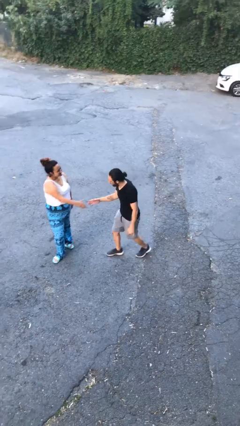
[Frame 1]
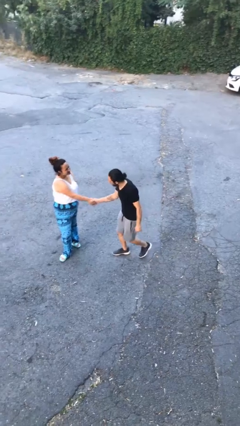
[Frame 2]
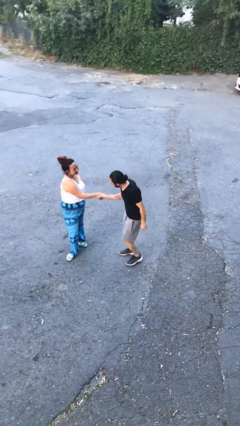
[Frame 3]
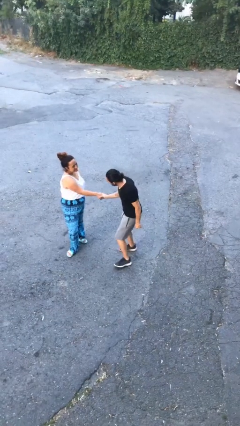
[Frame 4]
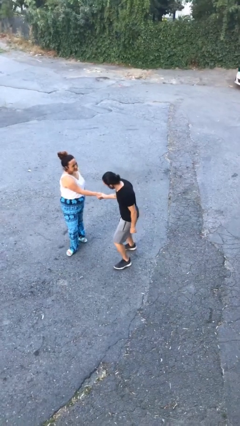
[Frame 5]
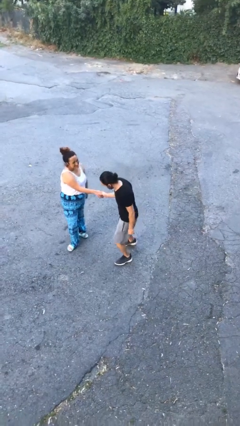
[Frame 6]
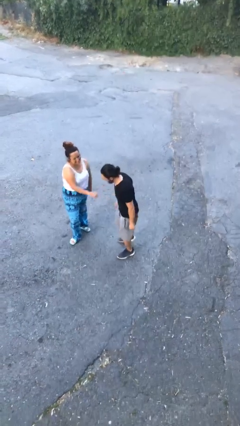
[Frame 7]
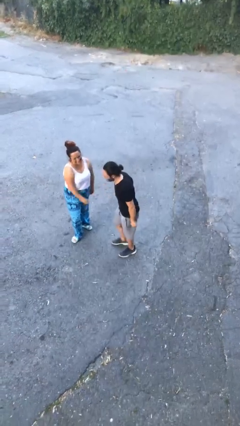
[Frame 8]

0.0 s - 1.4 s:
person shakes hand

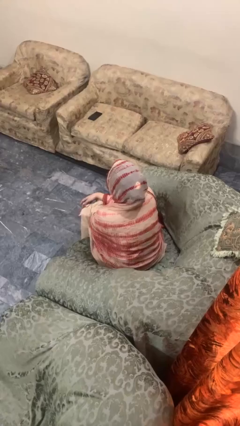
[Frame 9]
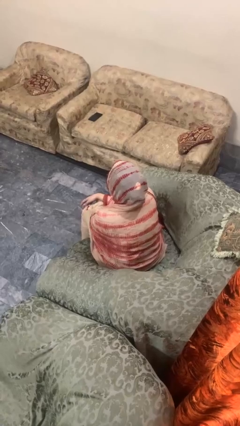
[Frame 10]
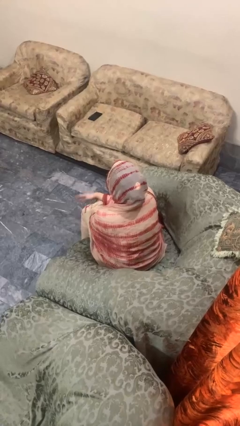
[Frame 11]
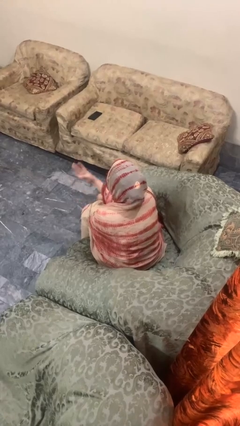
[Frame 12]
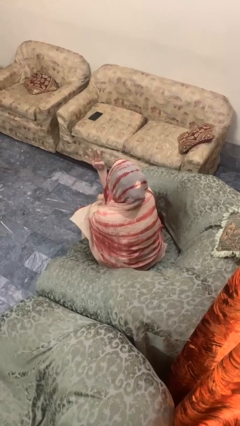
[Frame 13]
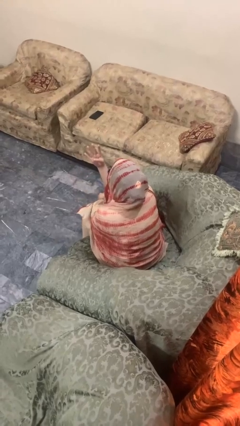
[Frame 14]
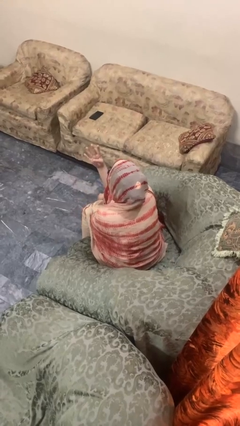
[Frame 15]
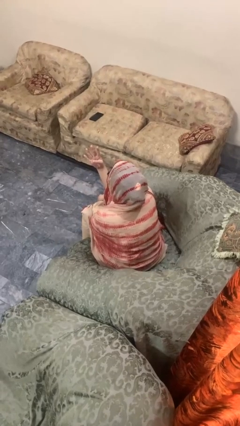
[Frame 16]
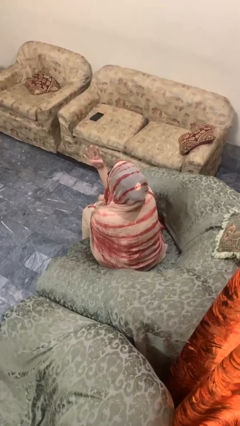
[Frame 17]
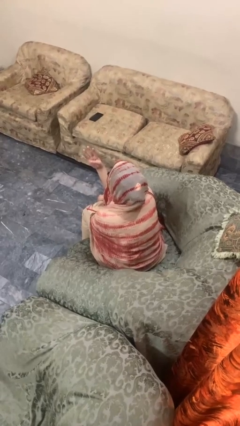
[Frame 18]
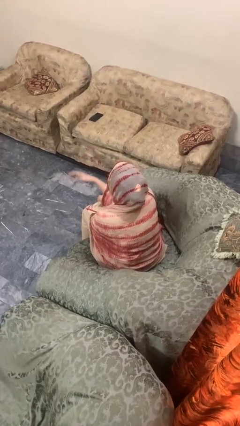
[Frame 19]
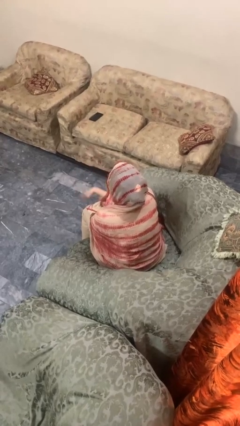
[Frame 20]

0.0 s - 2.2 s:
person gestures number four

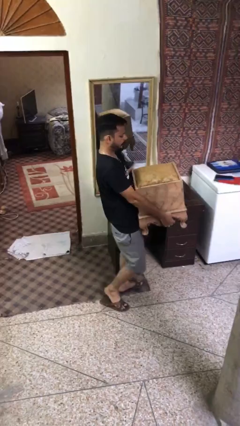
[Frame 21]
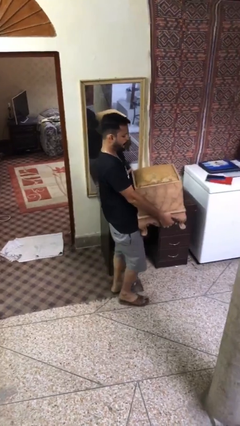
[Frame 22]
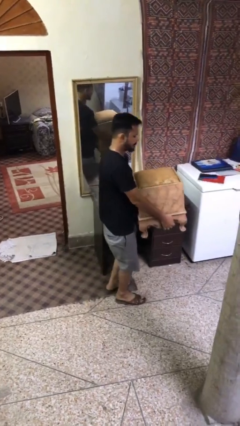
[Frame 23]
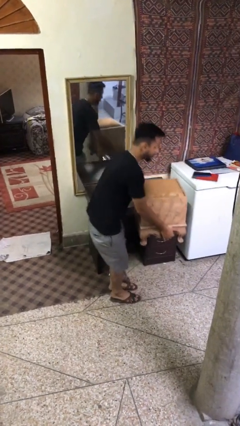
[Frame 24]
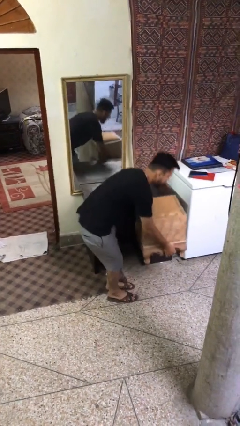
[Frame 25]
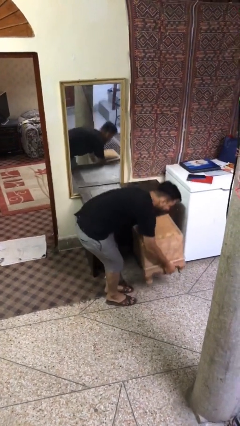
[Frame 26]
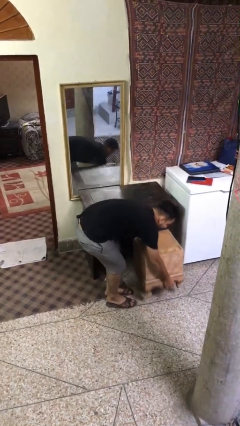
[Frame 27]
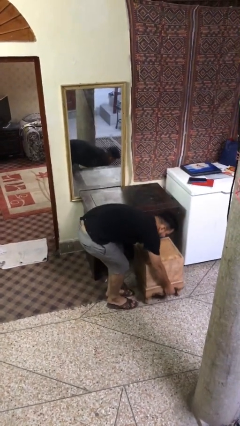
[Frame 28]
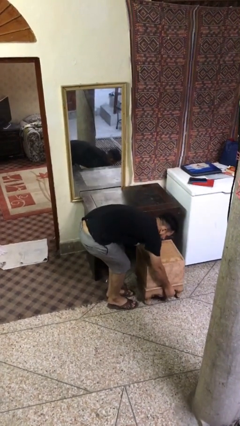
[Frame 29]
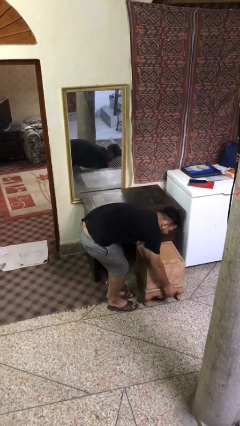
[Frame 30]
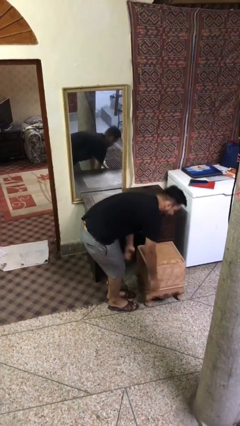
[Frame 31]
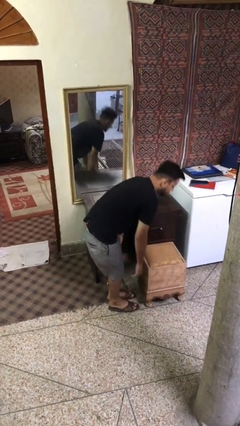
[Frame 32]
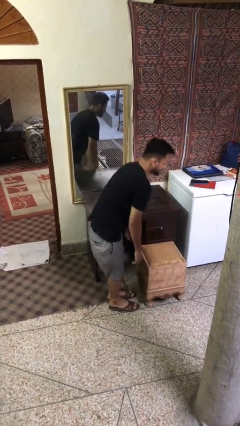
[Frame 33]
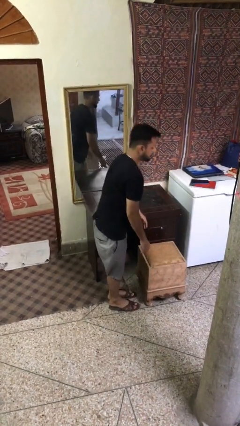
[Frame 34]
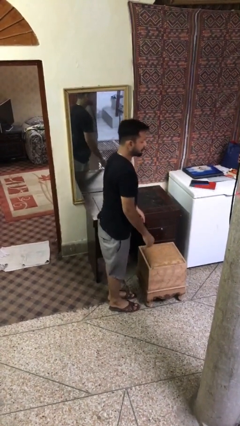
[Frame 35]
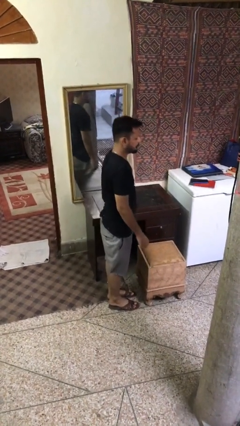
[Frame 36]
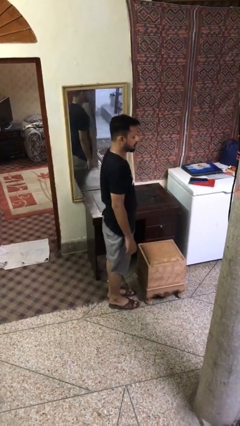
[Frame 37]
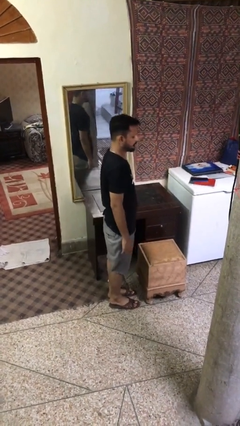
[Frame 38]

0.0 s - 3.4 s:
person puts down object on floor

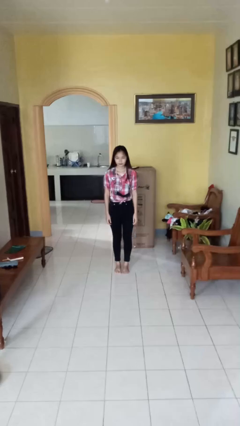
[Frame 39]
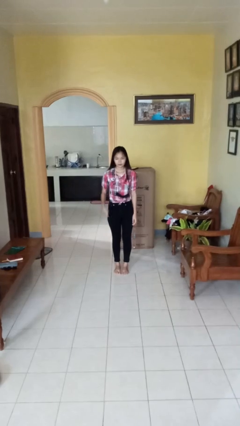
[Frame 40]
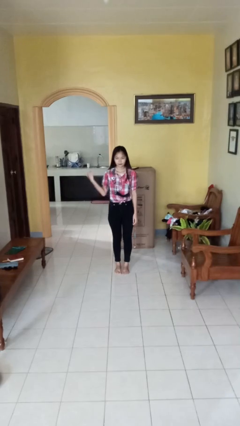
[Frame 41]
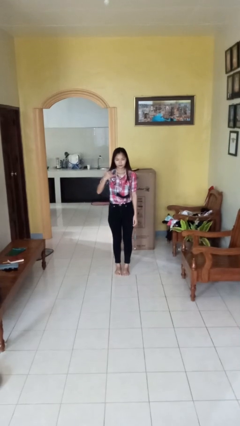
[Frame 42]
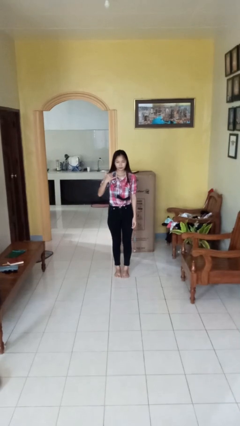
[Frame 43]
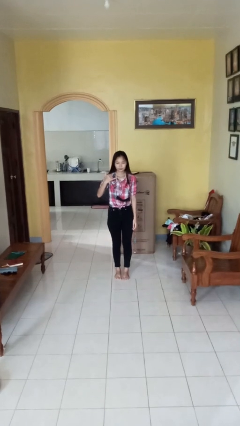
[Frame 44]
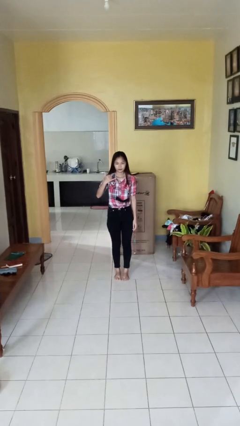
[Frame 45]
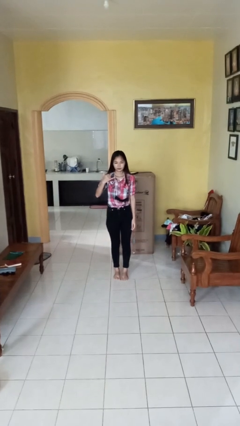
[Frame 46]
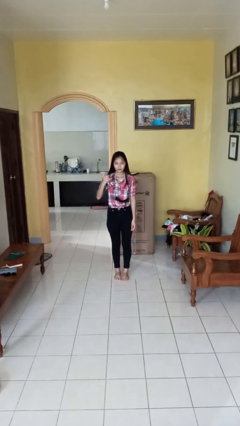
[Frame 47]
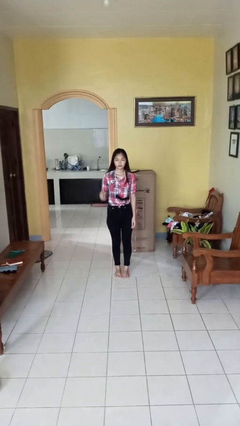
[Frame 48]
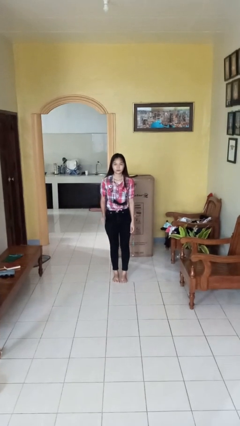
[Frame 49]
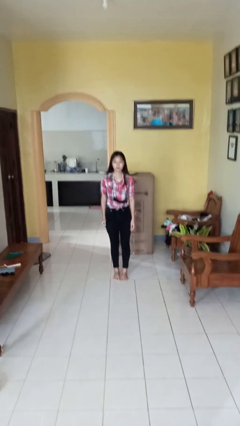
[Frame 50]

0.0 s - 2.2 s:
person gestures hang loose

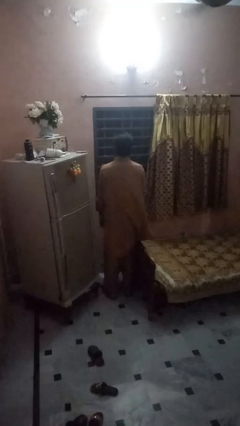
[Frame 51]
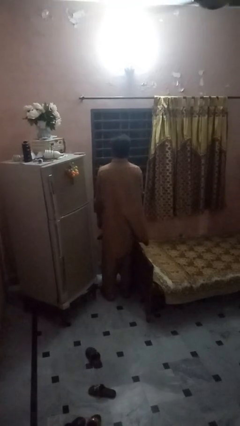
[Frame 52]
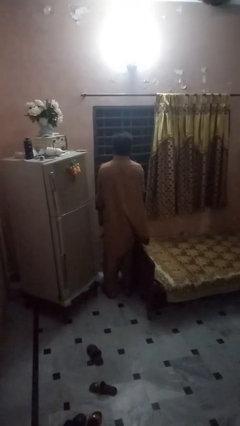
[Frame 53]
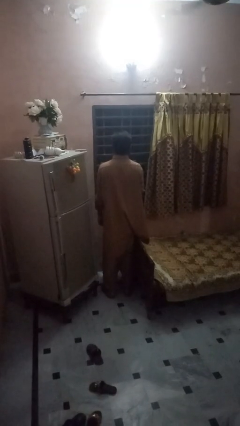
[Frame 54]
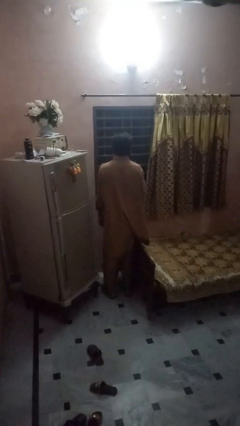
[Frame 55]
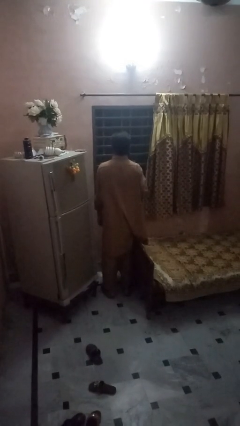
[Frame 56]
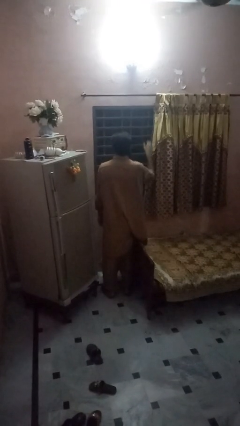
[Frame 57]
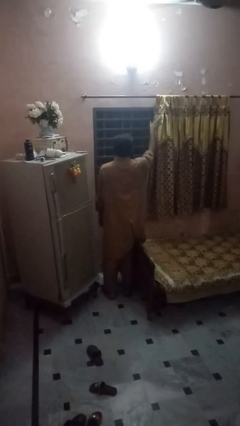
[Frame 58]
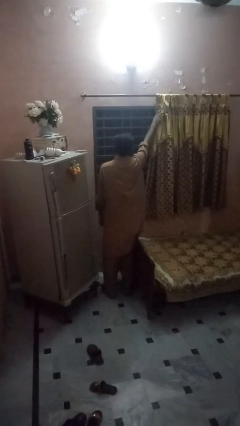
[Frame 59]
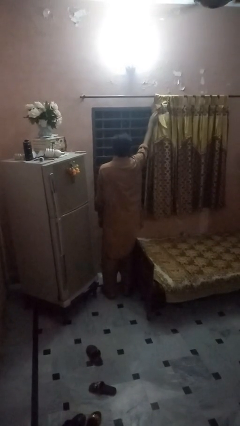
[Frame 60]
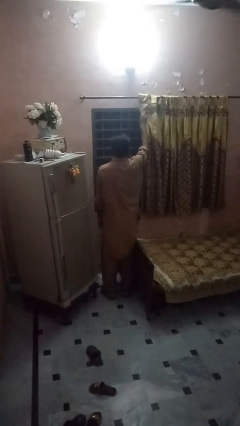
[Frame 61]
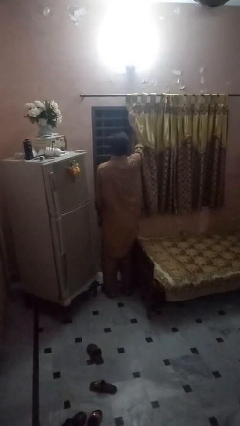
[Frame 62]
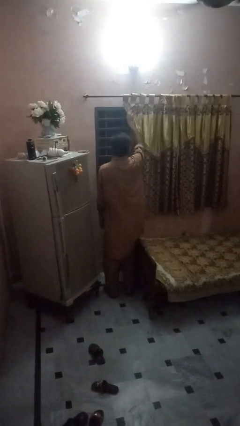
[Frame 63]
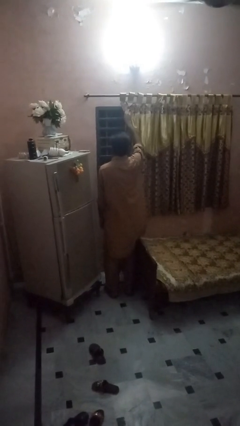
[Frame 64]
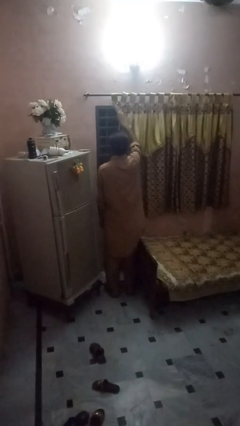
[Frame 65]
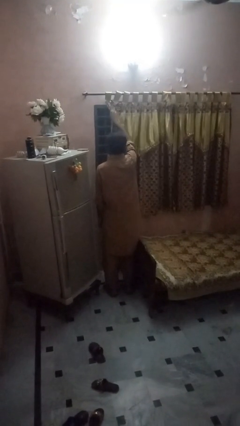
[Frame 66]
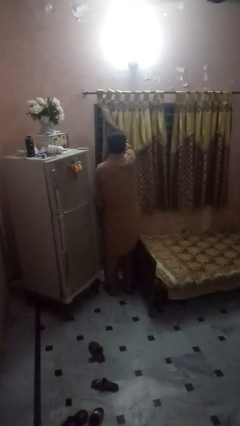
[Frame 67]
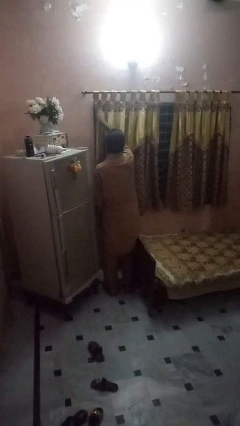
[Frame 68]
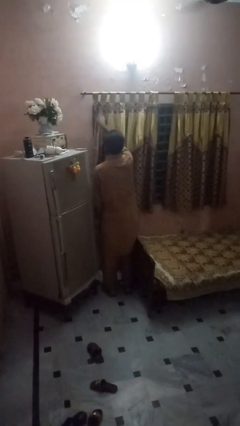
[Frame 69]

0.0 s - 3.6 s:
person closes curtains

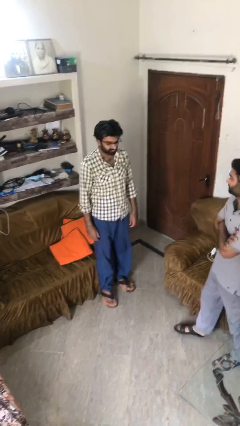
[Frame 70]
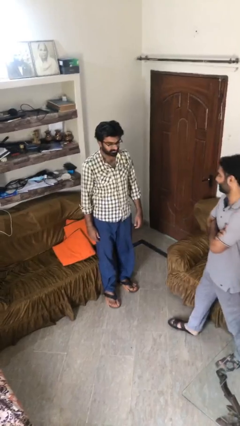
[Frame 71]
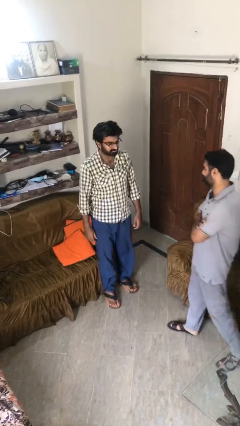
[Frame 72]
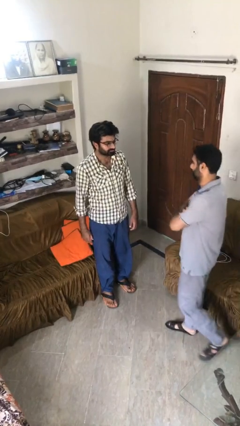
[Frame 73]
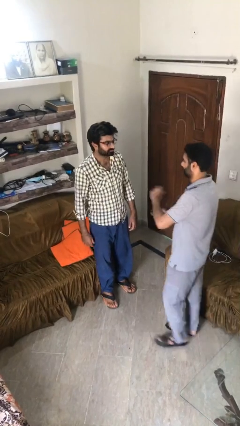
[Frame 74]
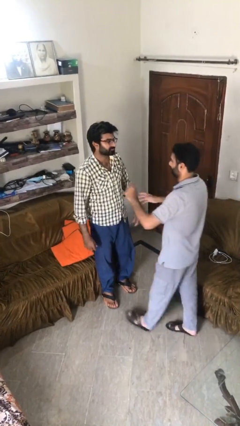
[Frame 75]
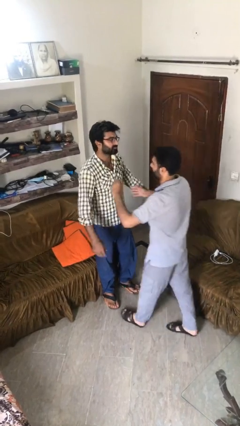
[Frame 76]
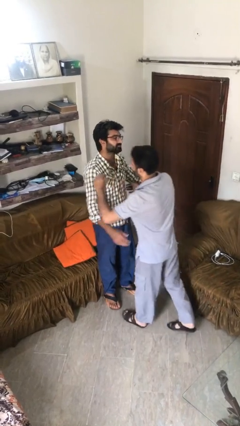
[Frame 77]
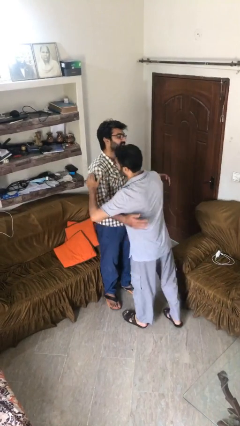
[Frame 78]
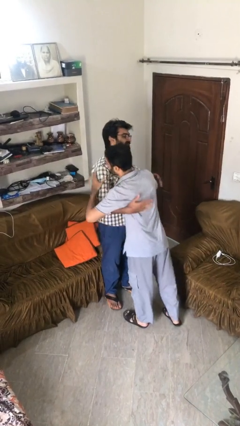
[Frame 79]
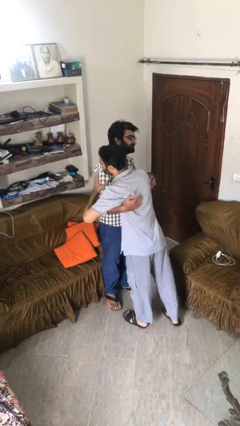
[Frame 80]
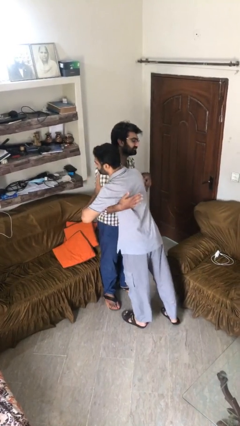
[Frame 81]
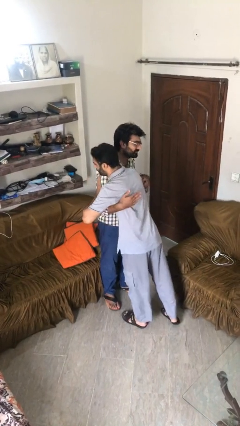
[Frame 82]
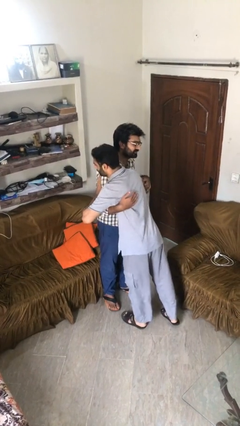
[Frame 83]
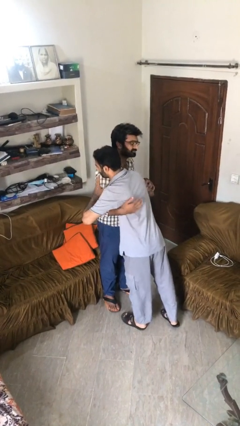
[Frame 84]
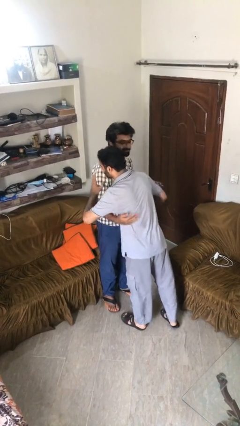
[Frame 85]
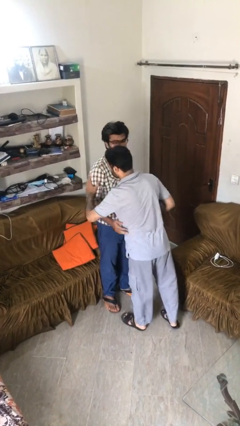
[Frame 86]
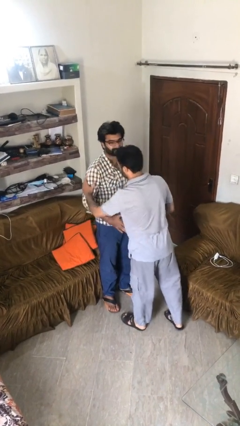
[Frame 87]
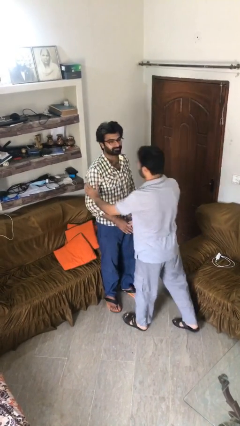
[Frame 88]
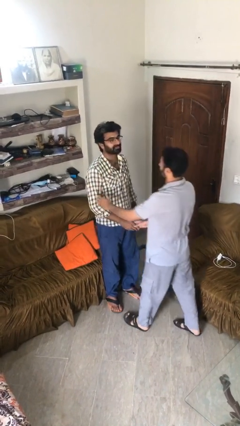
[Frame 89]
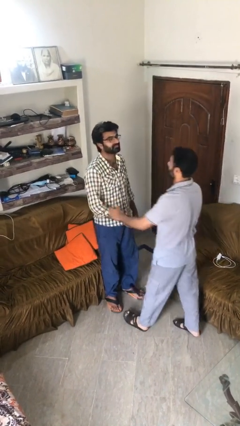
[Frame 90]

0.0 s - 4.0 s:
person embraces person

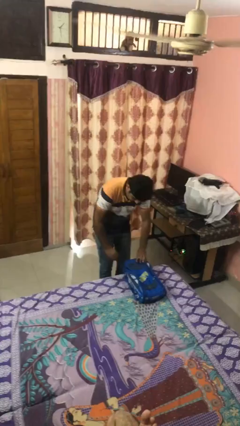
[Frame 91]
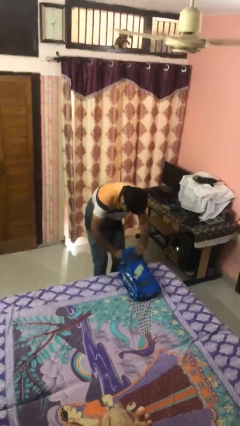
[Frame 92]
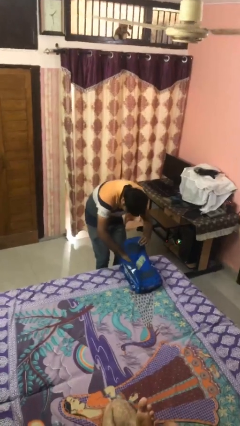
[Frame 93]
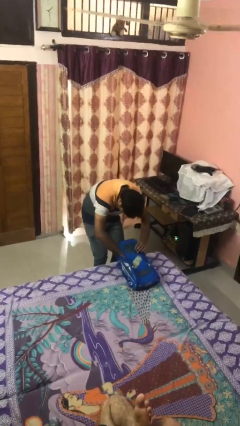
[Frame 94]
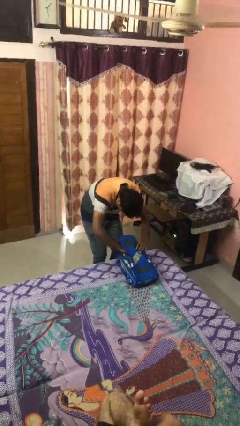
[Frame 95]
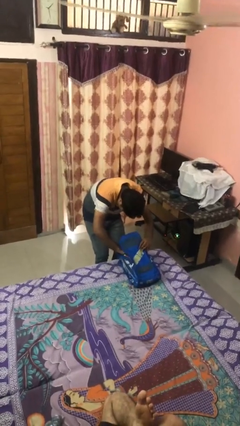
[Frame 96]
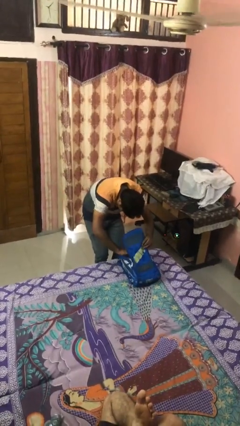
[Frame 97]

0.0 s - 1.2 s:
person searches in backpack
